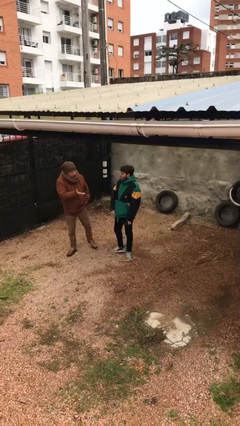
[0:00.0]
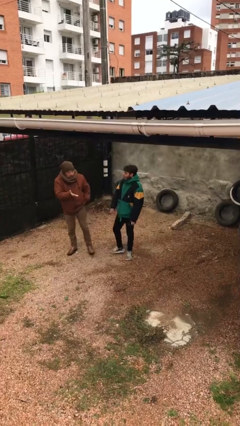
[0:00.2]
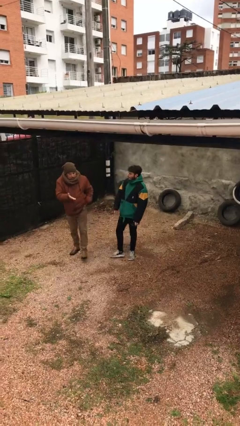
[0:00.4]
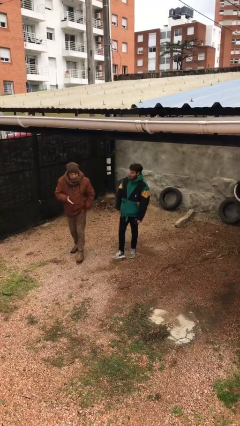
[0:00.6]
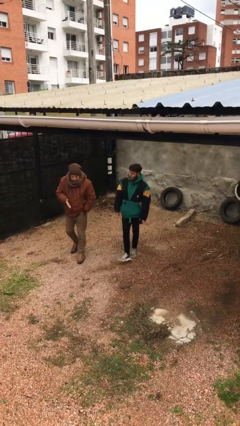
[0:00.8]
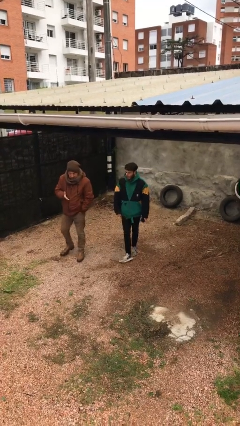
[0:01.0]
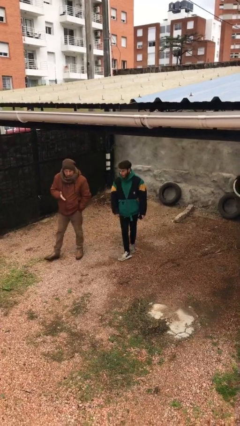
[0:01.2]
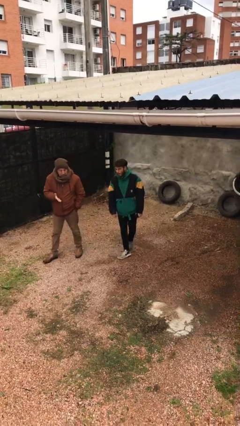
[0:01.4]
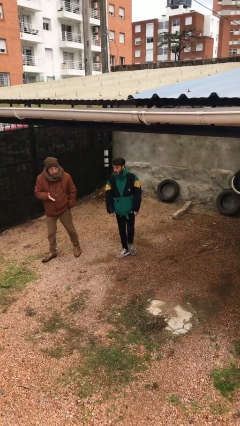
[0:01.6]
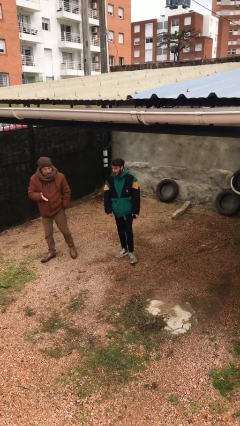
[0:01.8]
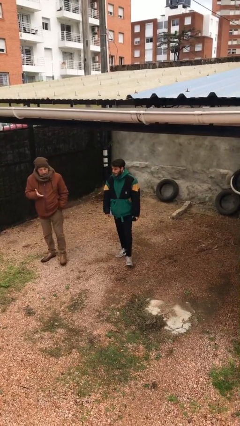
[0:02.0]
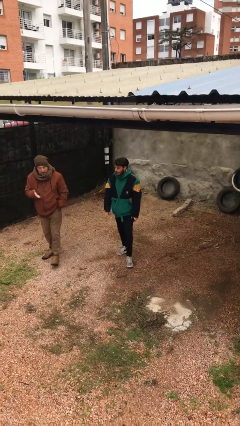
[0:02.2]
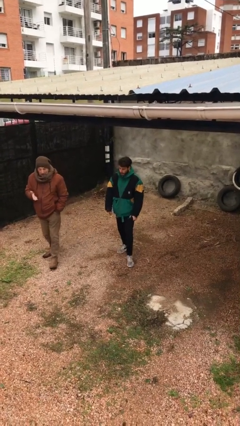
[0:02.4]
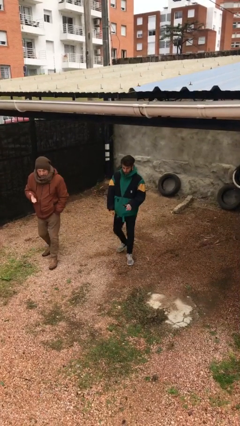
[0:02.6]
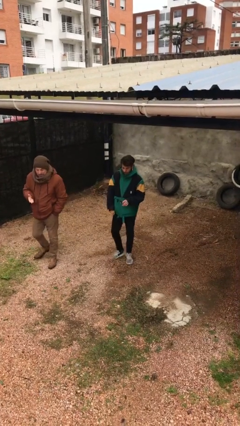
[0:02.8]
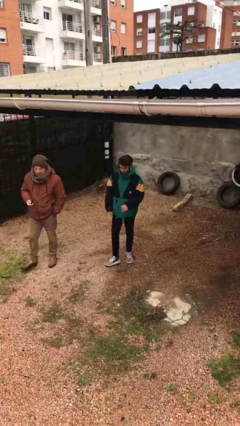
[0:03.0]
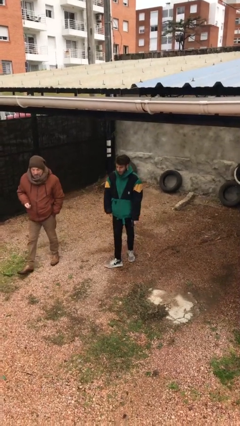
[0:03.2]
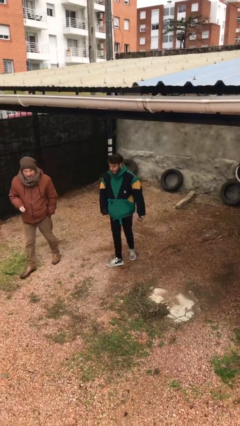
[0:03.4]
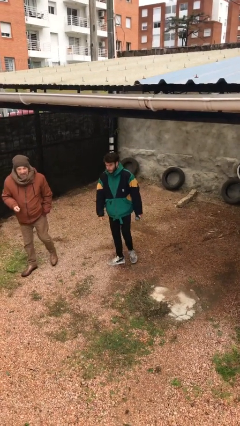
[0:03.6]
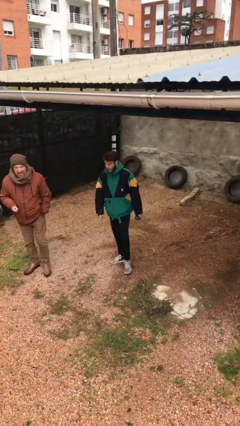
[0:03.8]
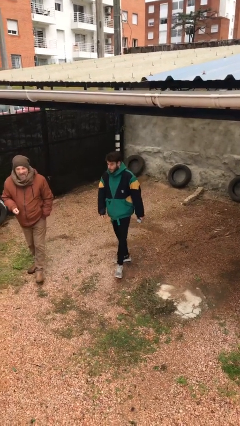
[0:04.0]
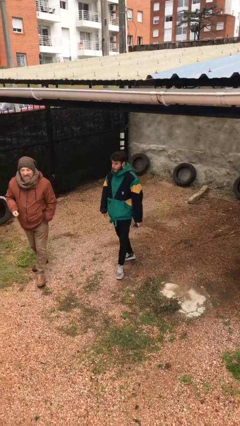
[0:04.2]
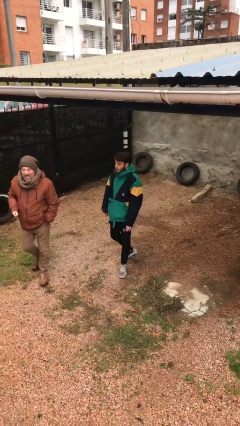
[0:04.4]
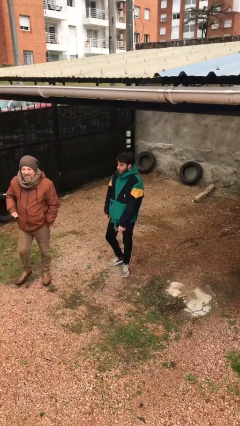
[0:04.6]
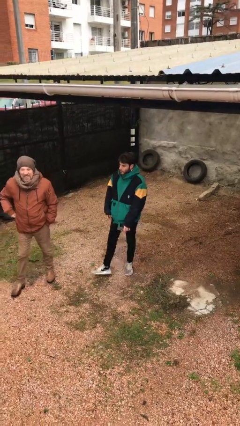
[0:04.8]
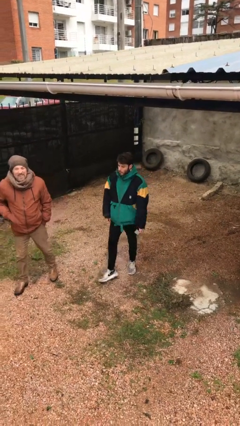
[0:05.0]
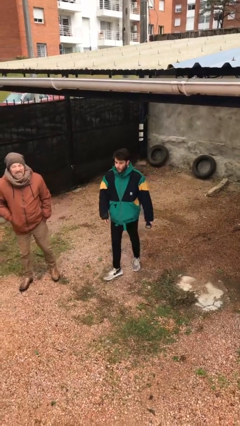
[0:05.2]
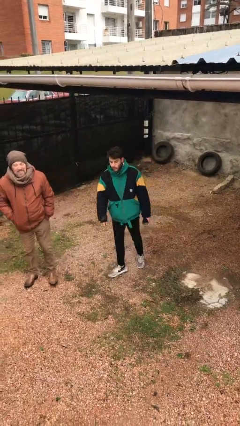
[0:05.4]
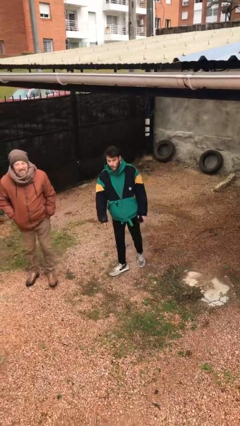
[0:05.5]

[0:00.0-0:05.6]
person talks to person

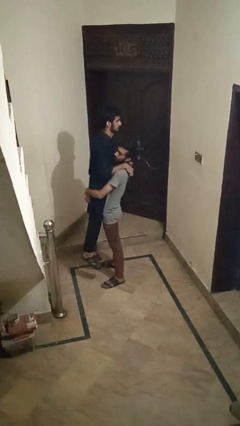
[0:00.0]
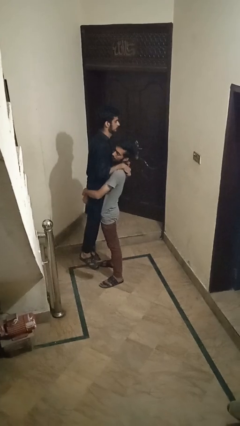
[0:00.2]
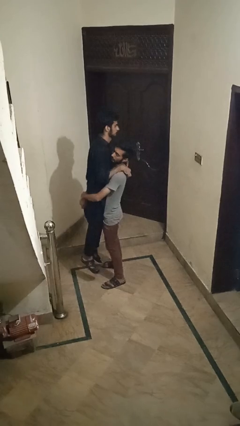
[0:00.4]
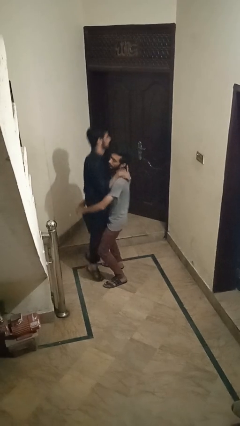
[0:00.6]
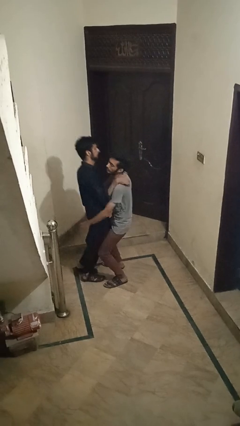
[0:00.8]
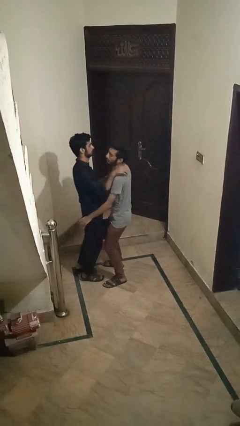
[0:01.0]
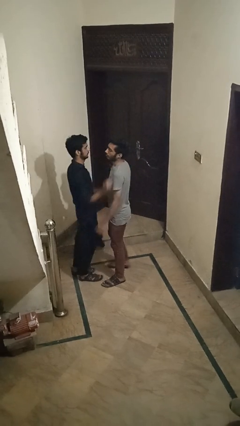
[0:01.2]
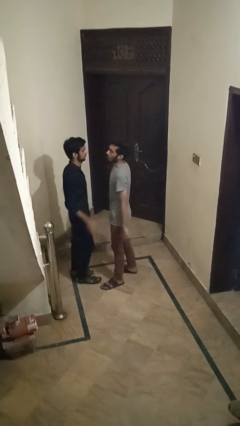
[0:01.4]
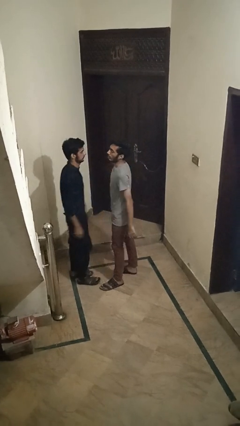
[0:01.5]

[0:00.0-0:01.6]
person puts down person

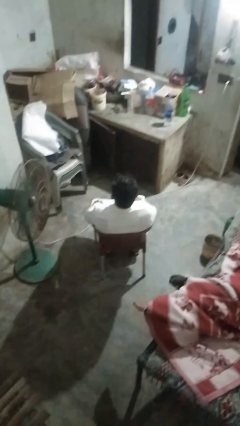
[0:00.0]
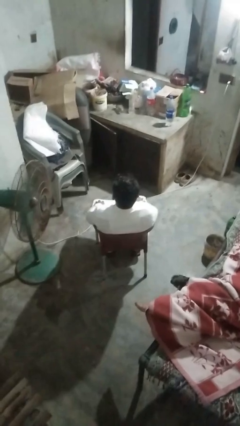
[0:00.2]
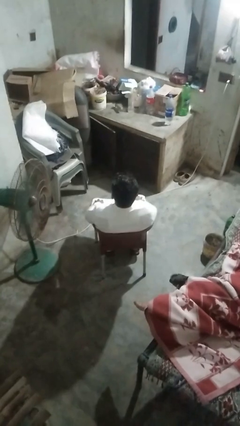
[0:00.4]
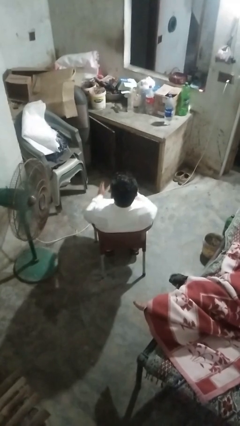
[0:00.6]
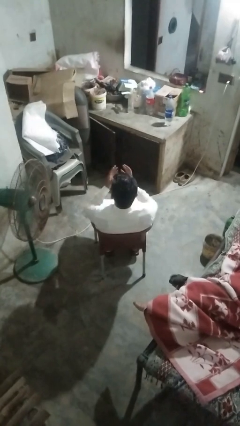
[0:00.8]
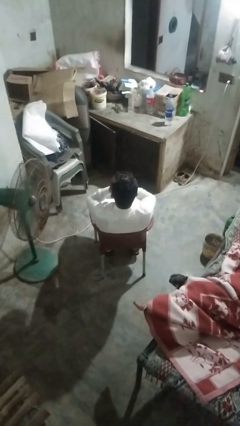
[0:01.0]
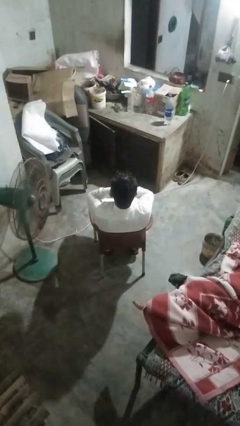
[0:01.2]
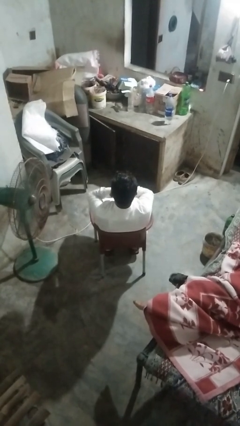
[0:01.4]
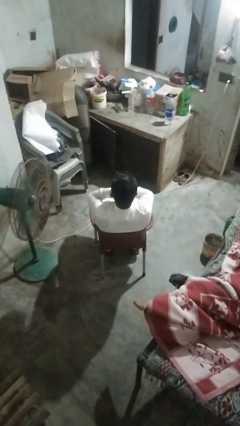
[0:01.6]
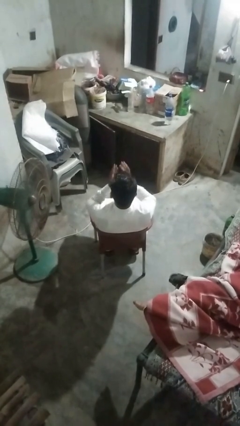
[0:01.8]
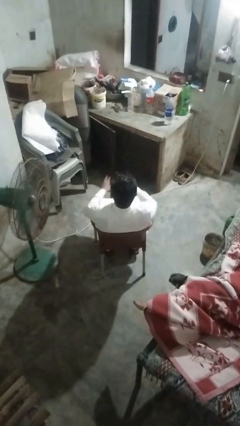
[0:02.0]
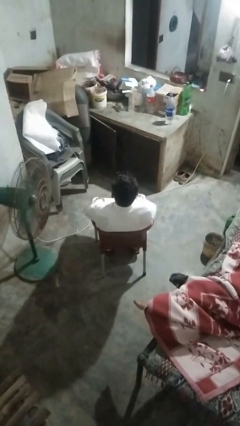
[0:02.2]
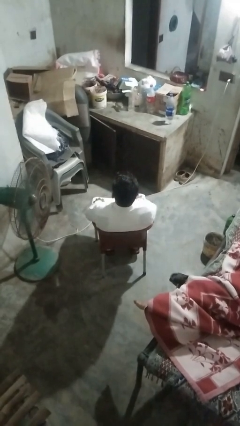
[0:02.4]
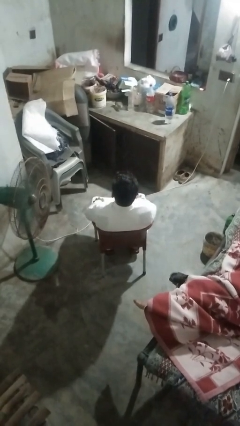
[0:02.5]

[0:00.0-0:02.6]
person yawns

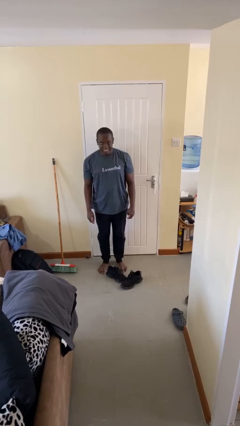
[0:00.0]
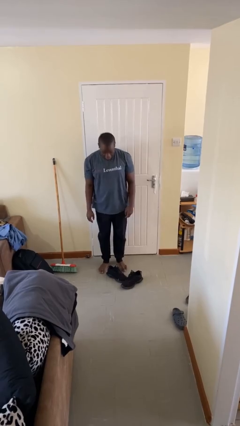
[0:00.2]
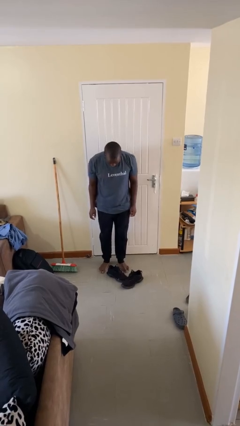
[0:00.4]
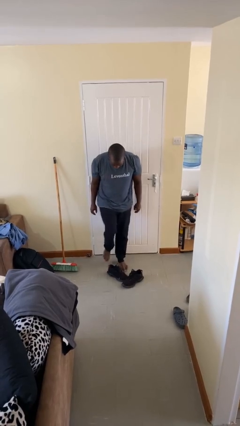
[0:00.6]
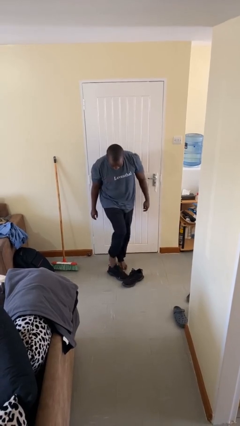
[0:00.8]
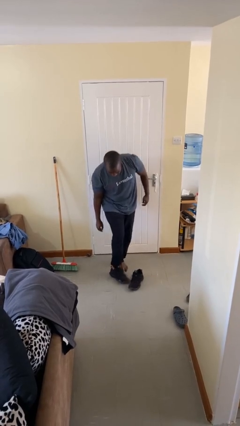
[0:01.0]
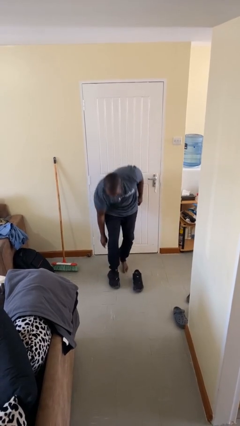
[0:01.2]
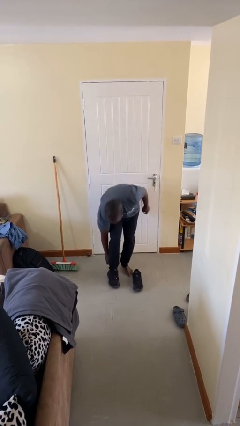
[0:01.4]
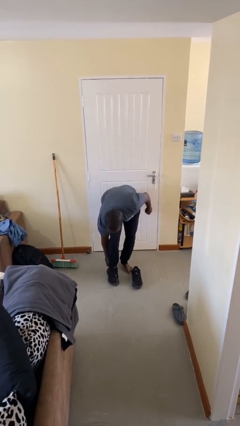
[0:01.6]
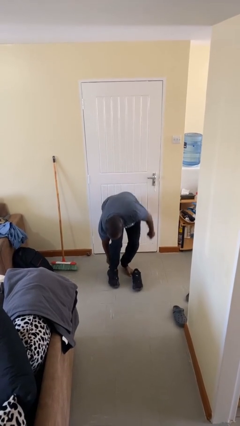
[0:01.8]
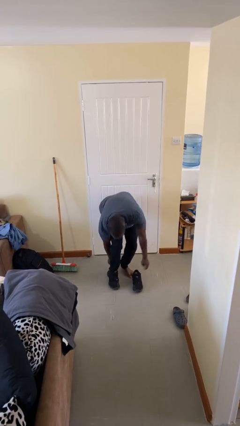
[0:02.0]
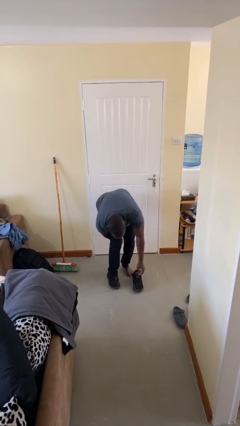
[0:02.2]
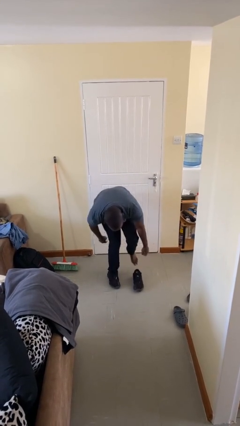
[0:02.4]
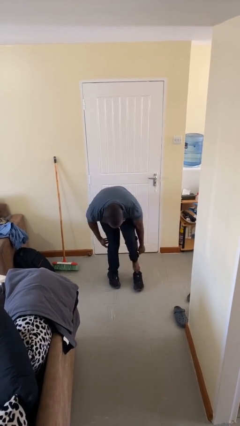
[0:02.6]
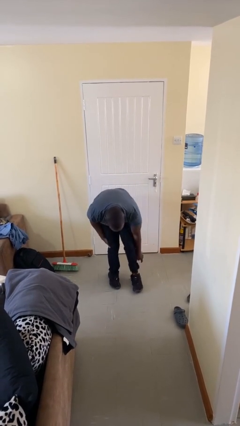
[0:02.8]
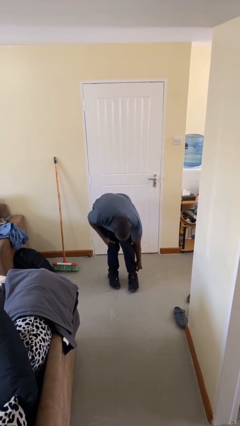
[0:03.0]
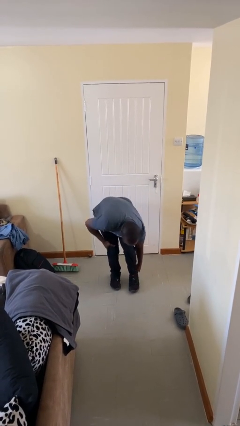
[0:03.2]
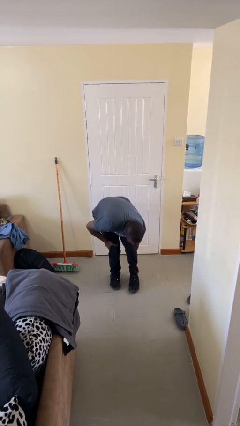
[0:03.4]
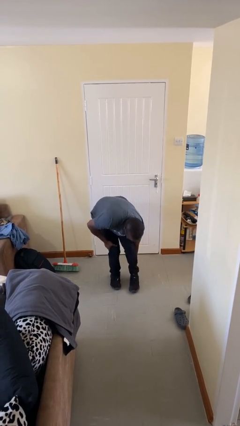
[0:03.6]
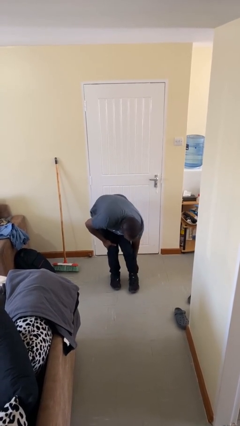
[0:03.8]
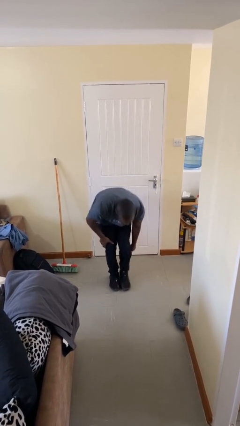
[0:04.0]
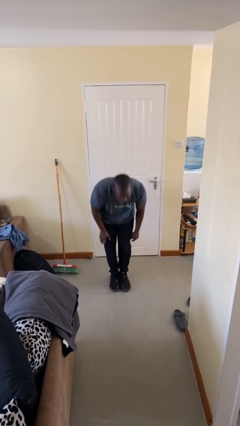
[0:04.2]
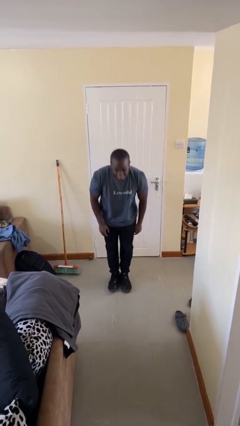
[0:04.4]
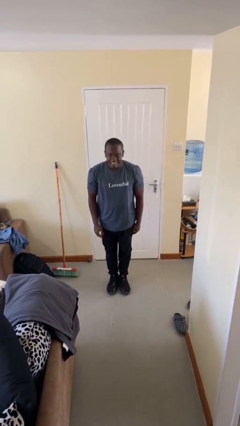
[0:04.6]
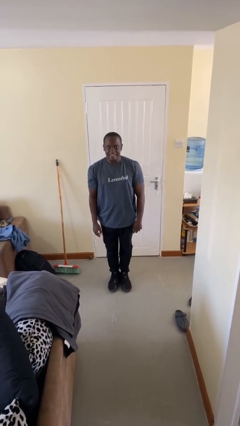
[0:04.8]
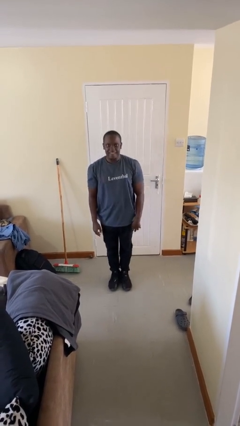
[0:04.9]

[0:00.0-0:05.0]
person puts on shoes

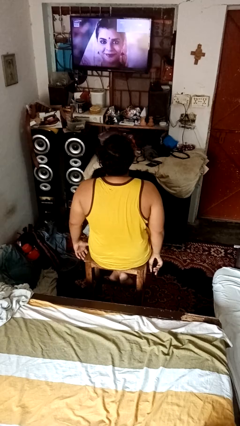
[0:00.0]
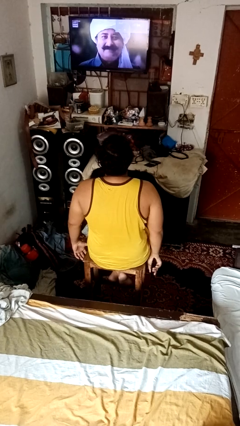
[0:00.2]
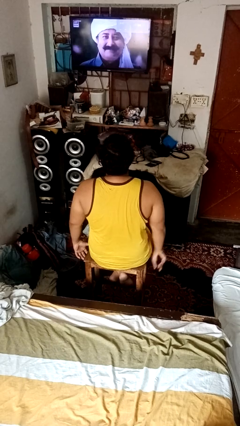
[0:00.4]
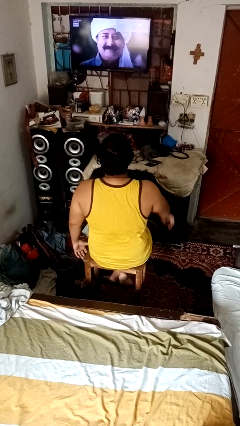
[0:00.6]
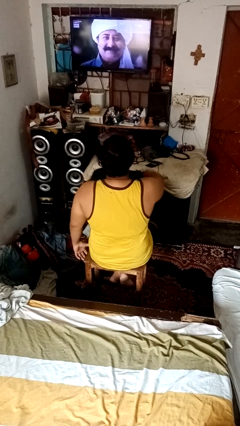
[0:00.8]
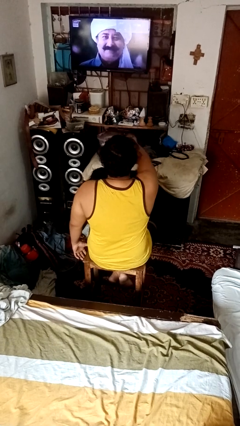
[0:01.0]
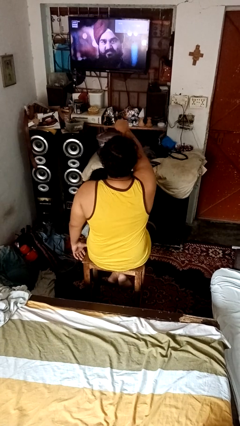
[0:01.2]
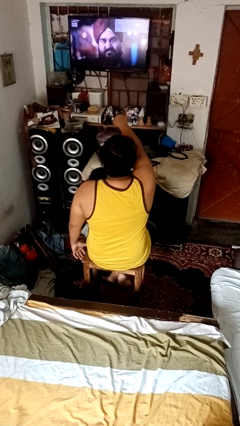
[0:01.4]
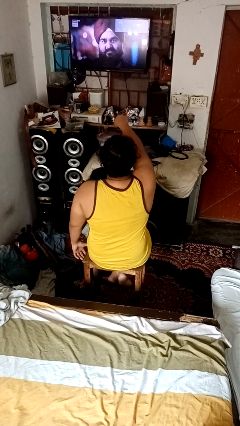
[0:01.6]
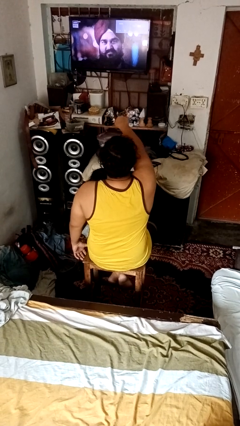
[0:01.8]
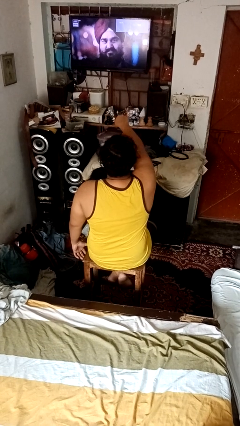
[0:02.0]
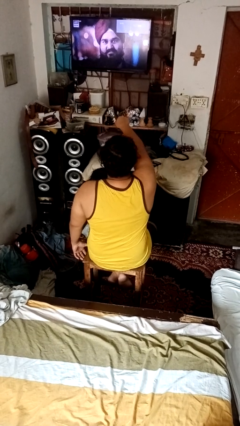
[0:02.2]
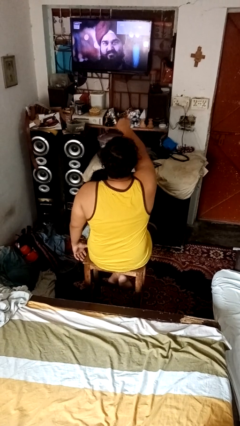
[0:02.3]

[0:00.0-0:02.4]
person uses television remote
